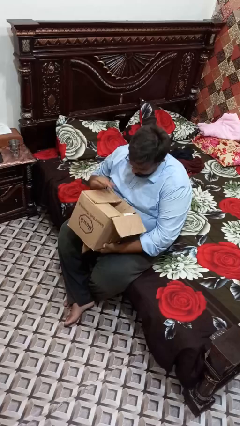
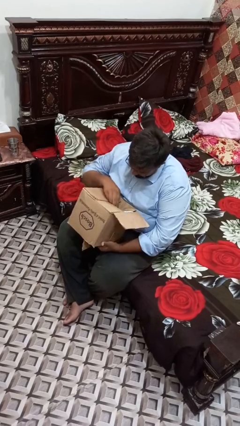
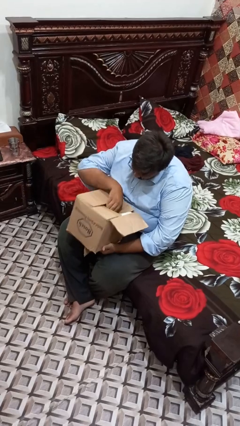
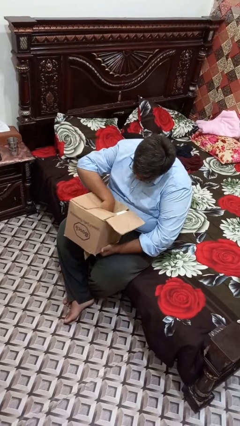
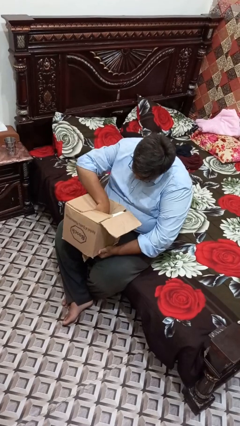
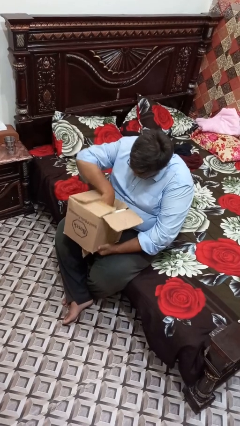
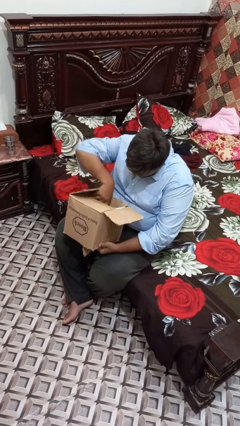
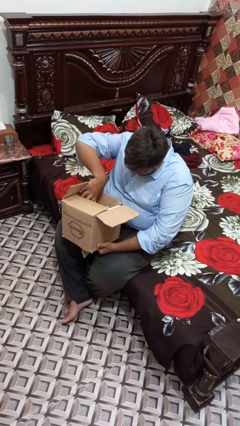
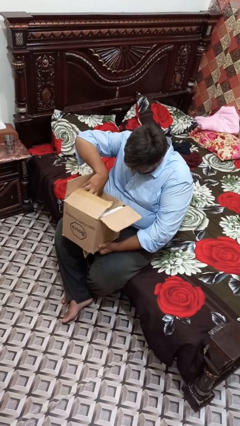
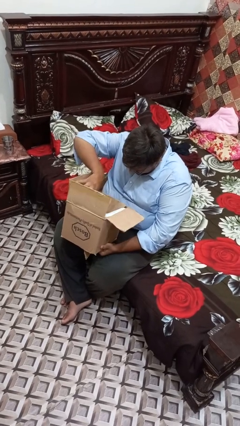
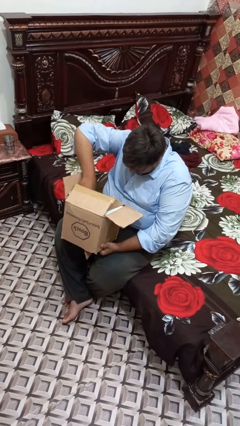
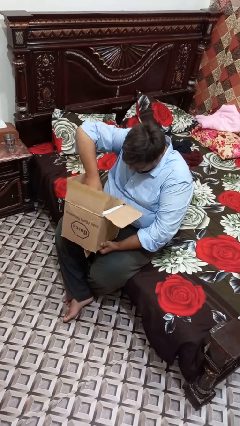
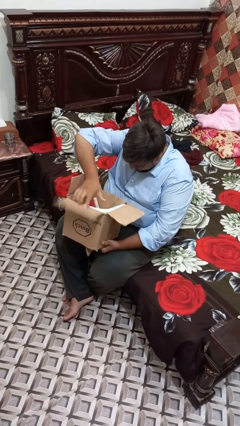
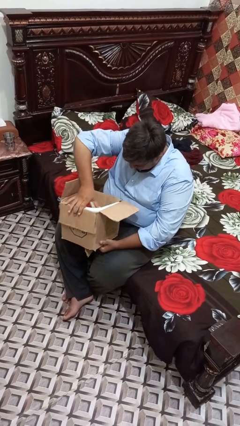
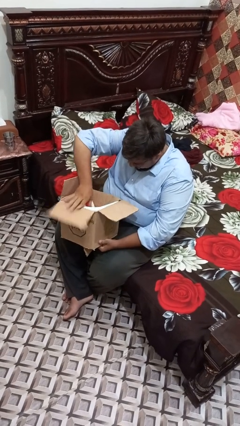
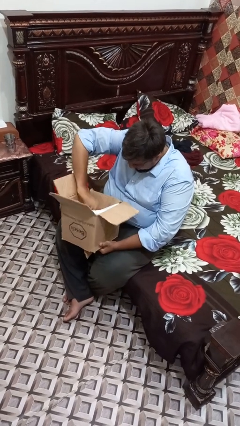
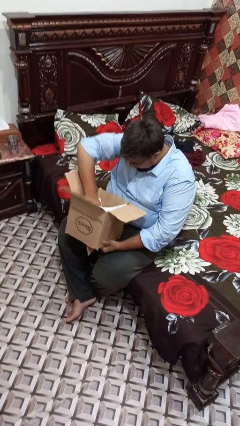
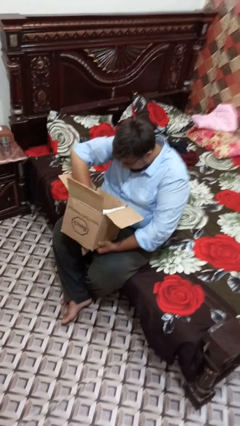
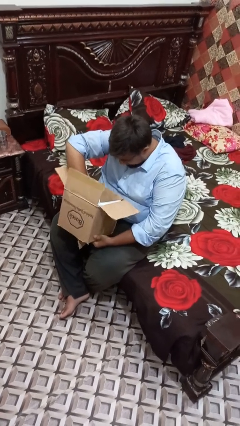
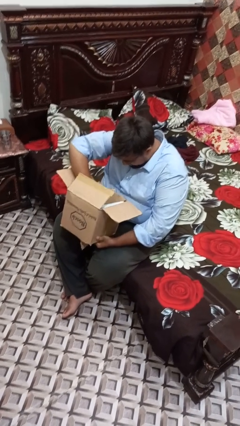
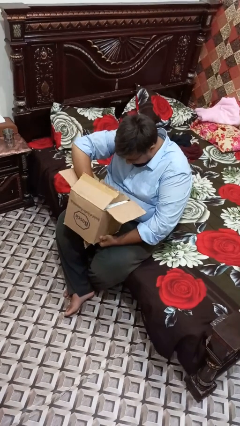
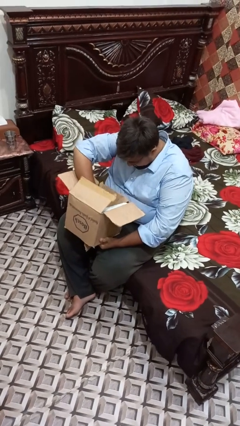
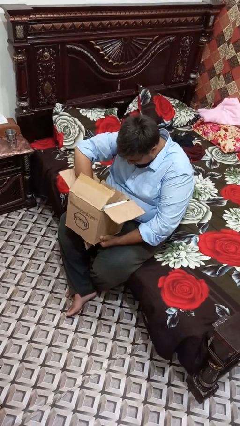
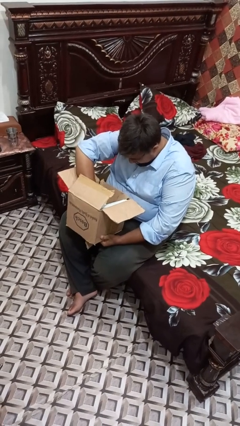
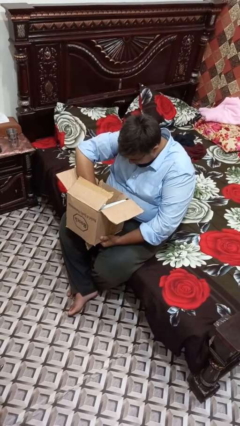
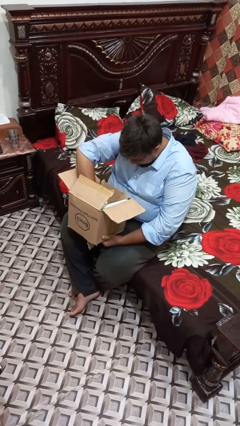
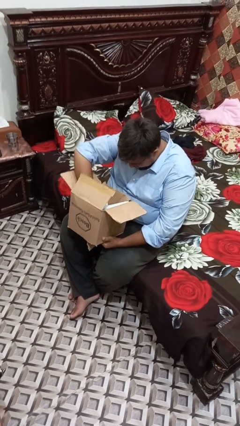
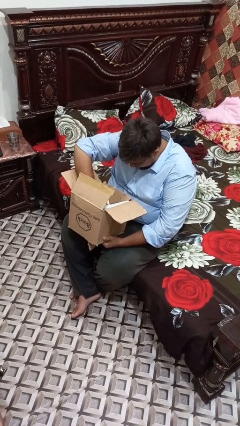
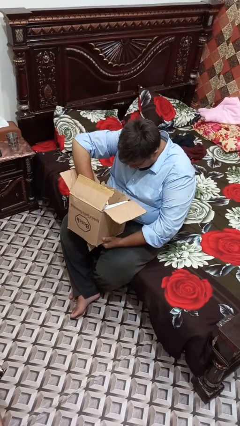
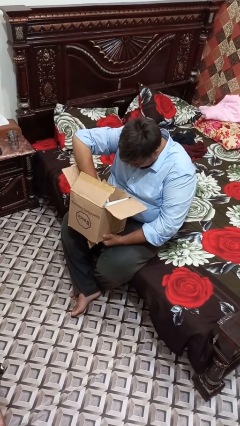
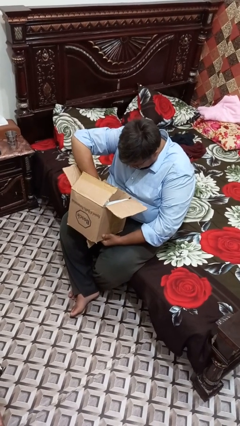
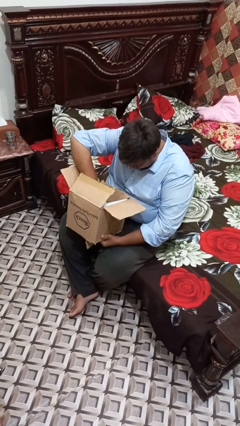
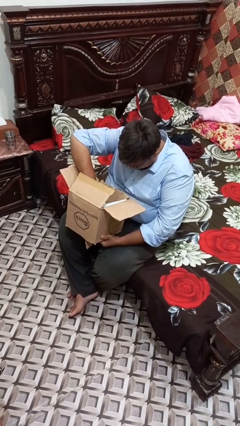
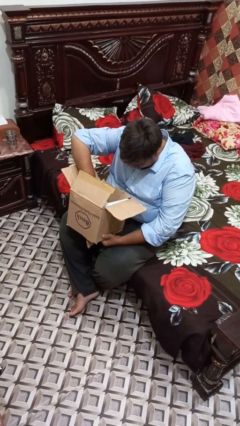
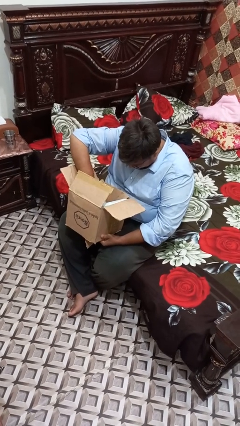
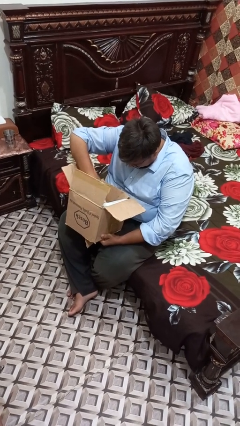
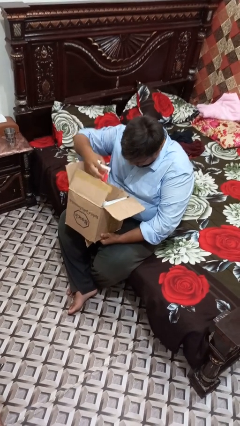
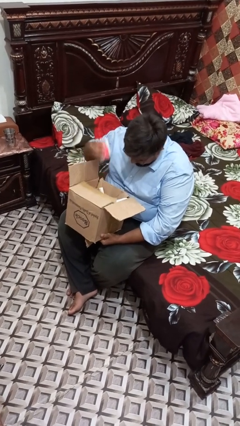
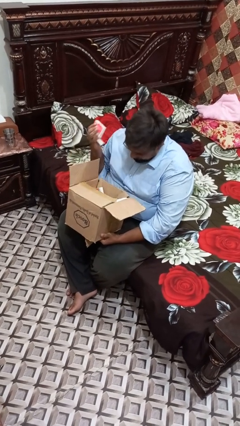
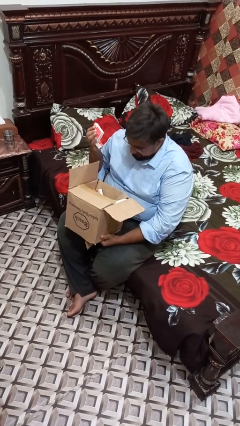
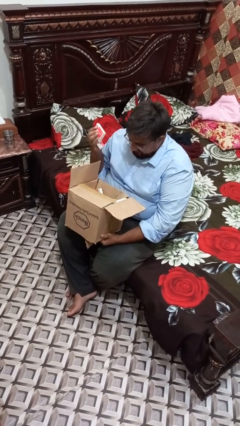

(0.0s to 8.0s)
person searches in box

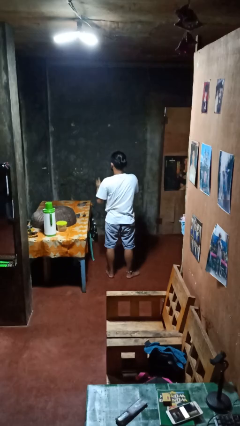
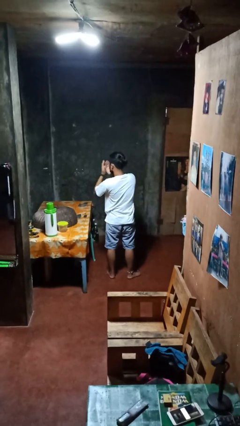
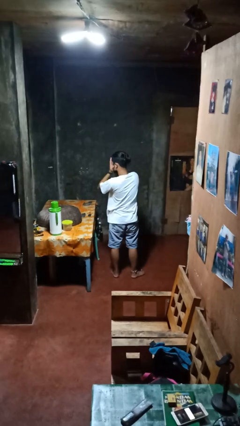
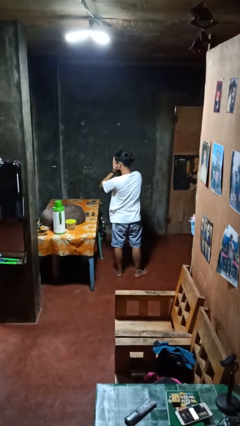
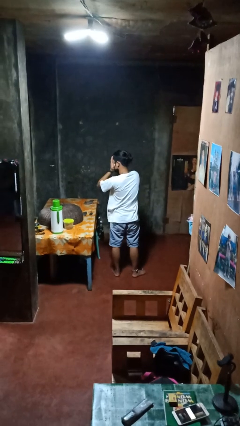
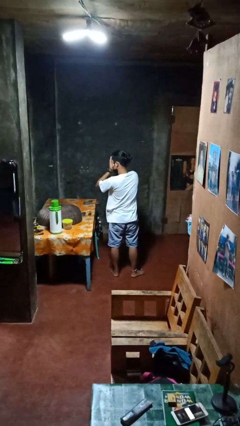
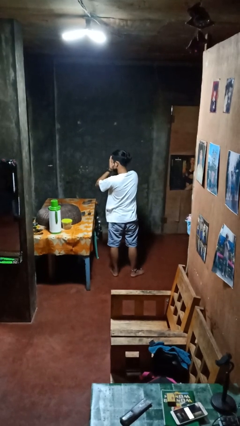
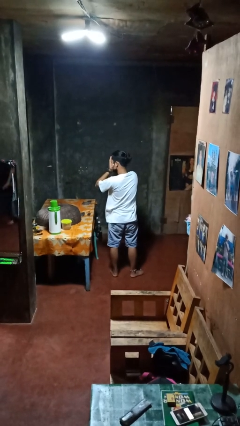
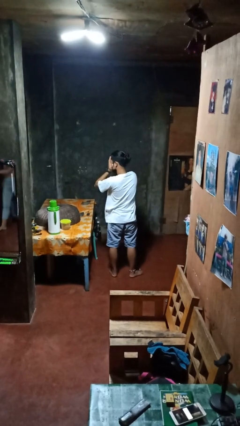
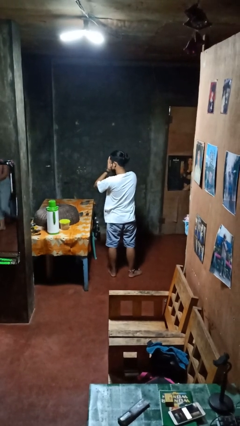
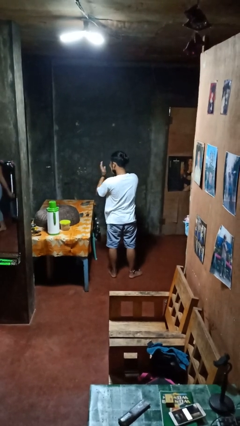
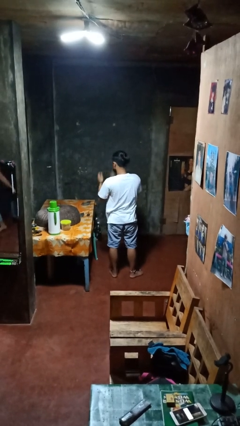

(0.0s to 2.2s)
person covers face with hands

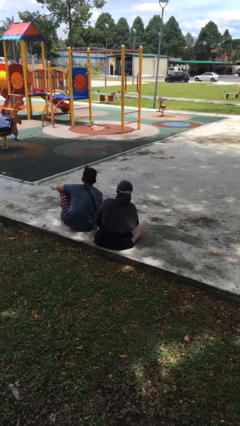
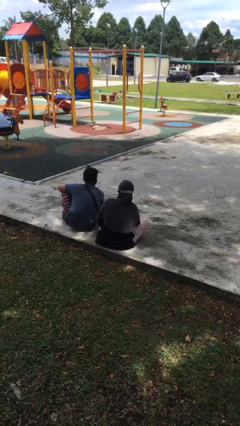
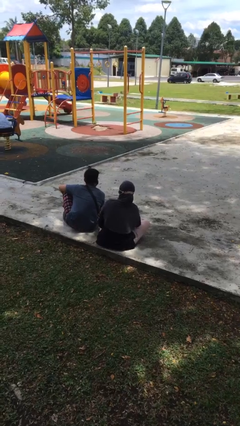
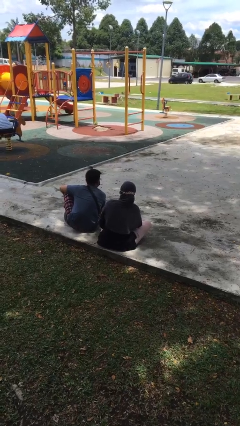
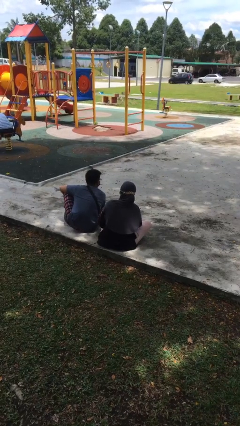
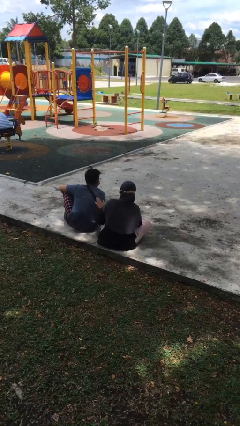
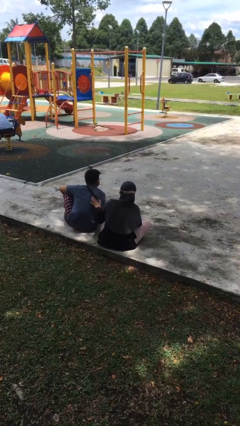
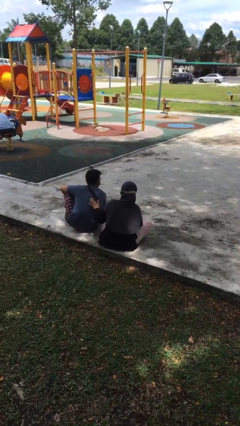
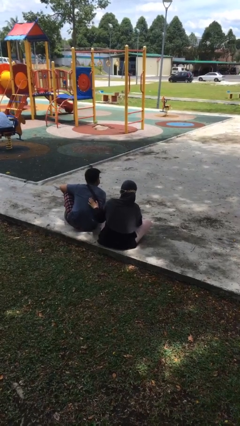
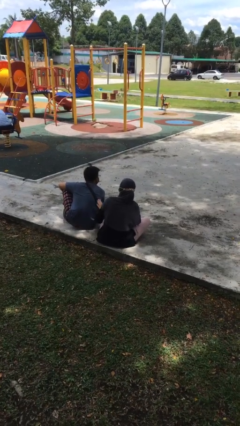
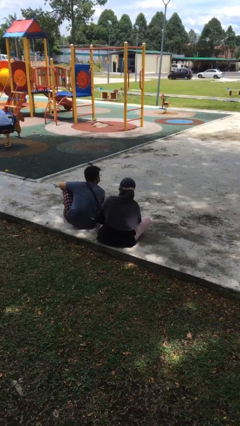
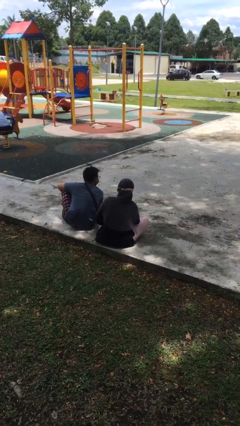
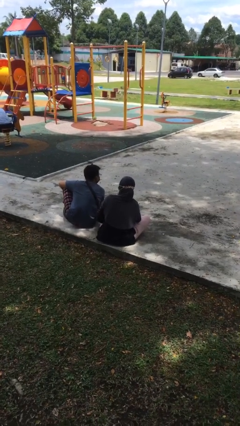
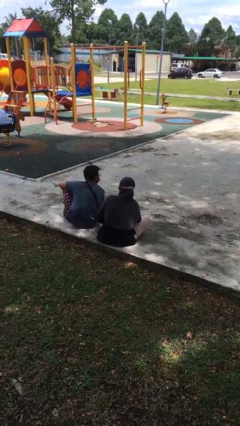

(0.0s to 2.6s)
person touches back of person

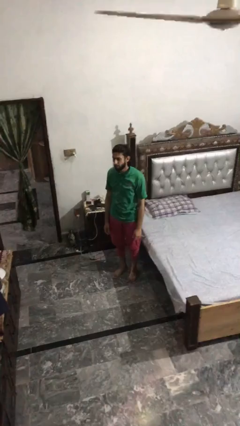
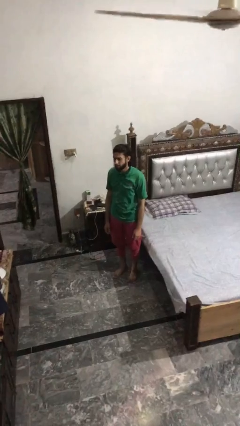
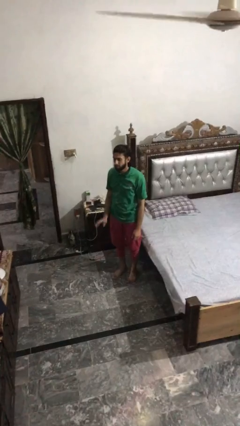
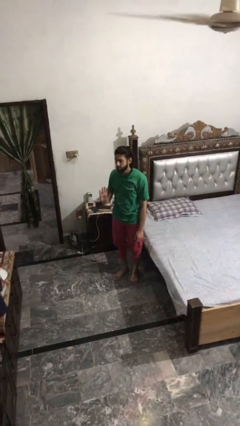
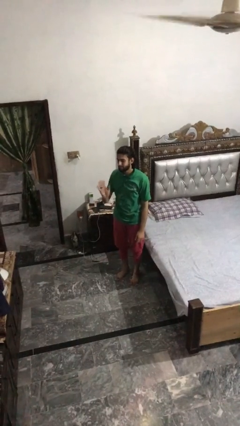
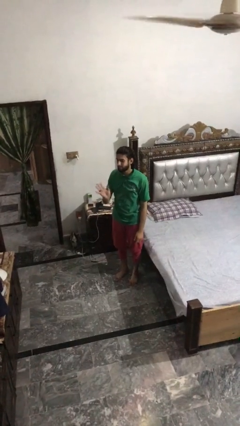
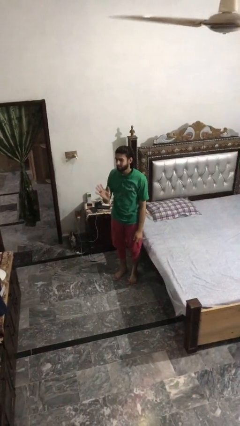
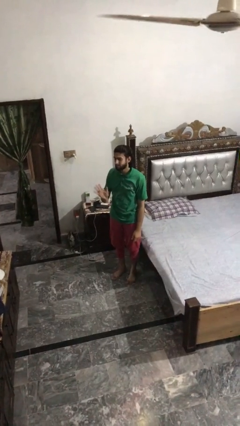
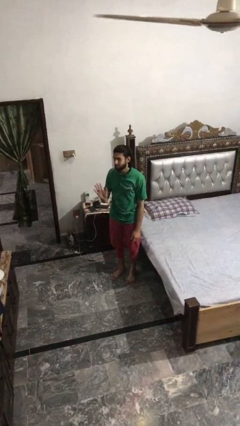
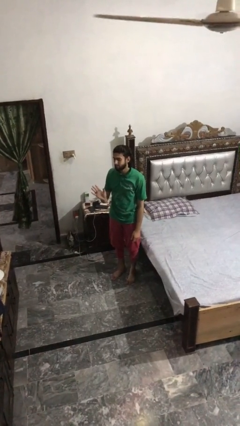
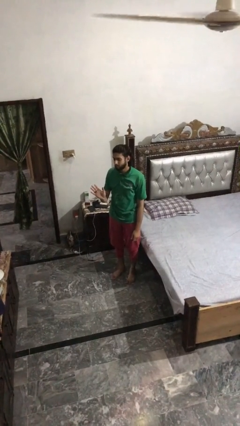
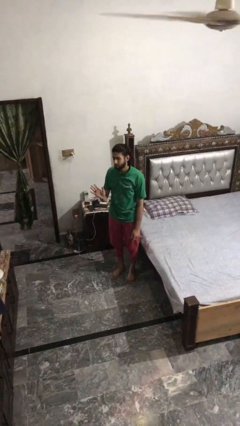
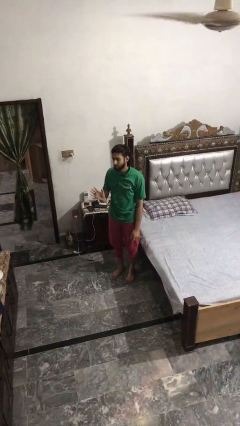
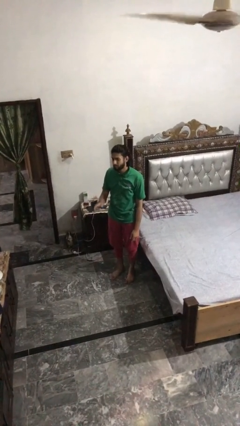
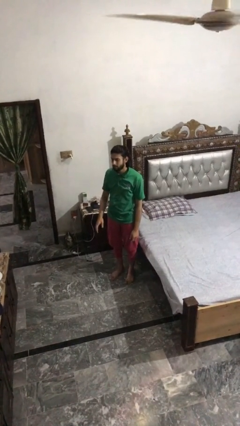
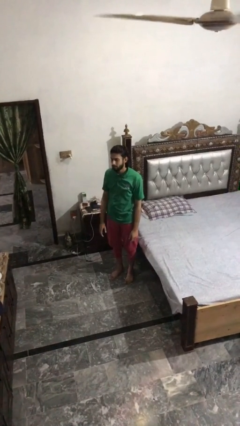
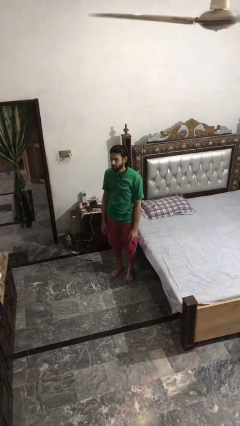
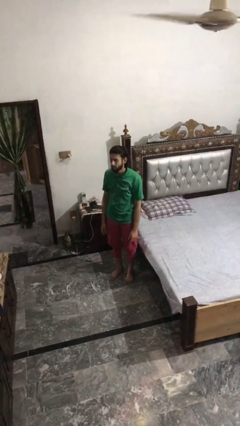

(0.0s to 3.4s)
person waves at person

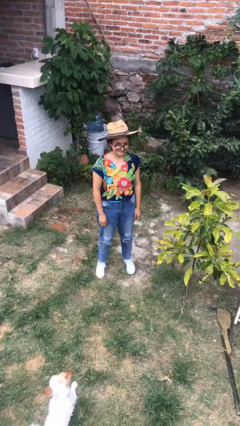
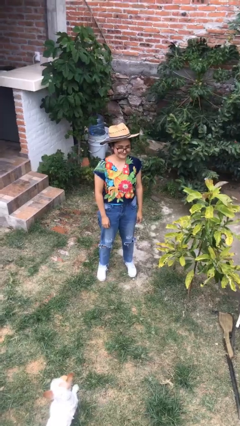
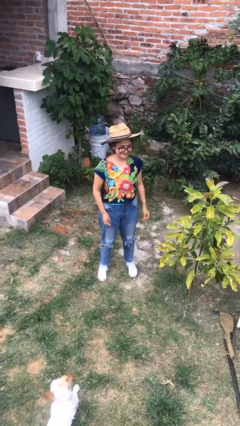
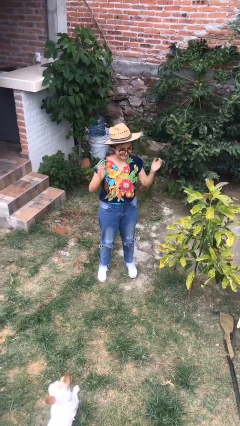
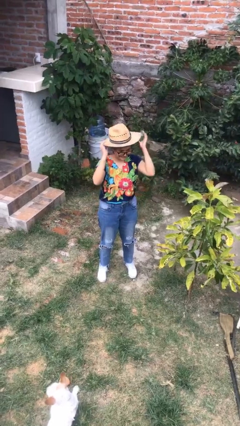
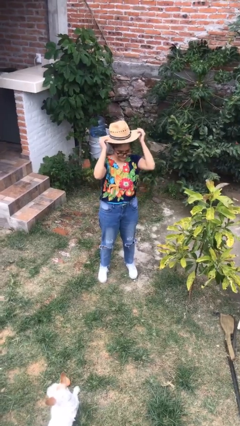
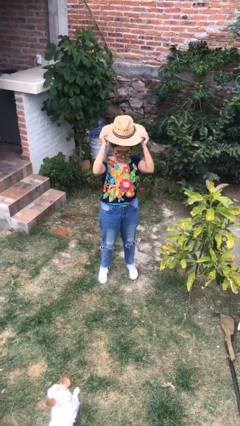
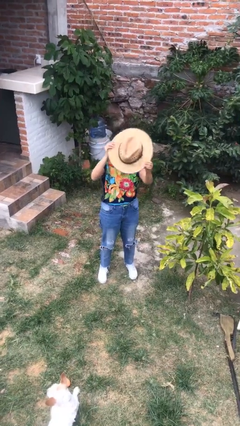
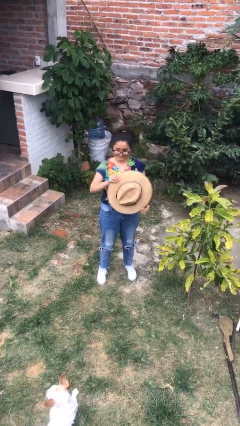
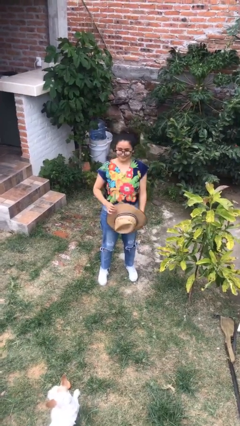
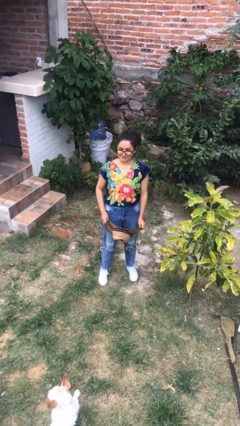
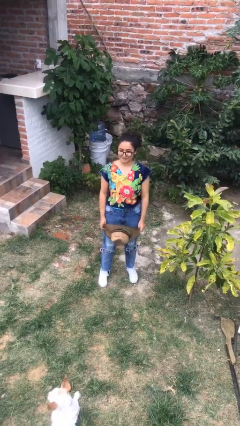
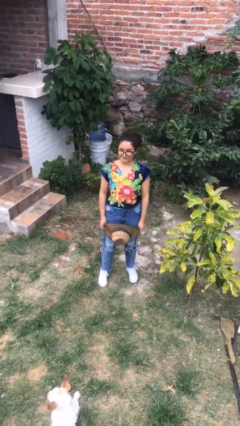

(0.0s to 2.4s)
person takes off hat
